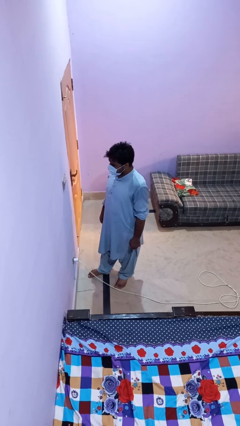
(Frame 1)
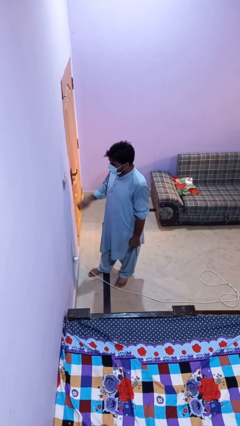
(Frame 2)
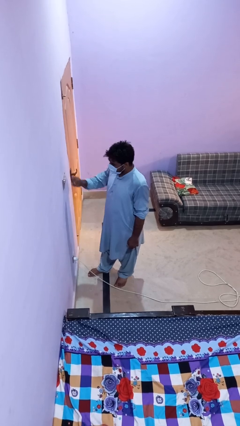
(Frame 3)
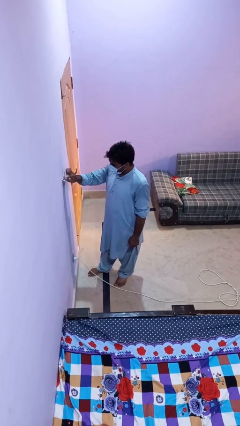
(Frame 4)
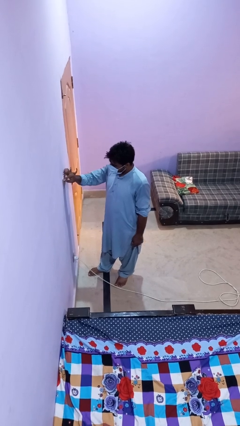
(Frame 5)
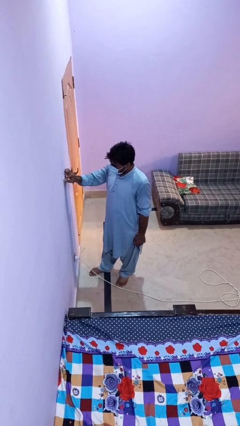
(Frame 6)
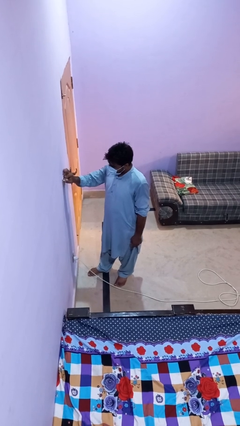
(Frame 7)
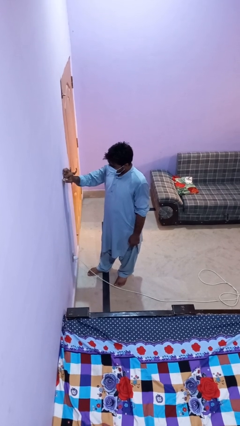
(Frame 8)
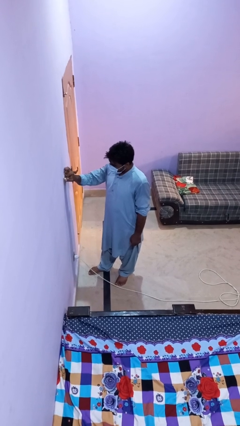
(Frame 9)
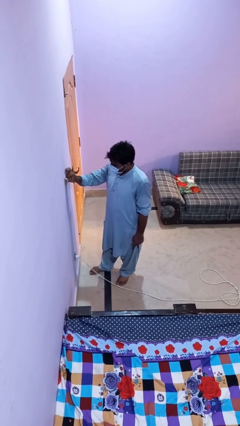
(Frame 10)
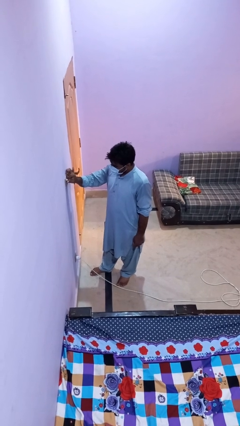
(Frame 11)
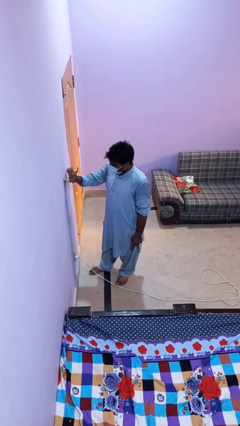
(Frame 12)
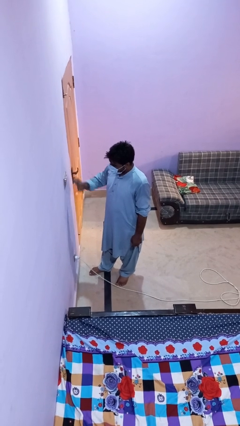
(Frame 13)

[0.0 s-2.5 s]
person adjusts thermostat

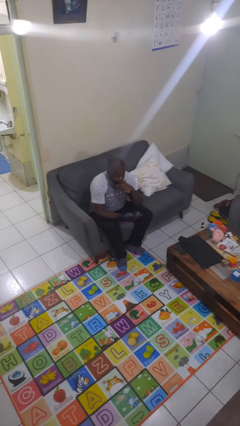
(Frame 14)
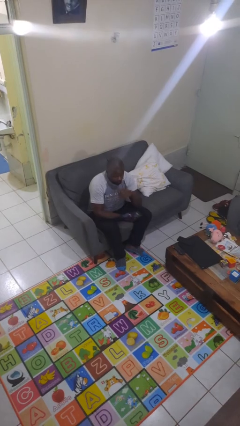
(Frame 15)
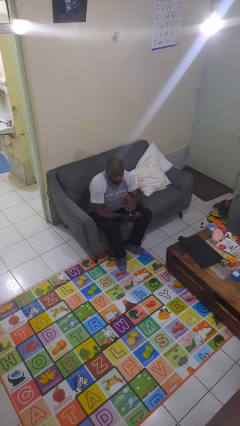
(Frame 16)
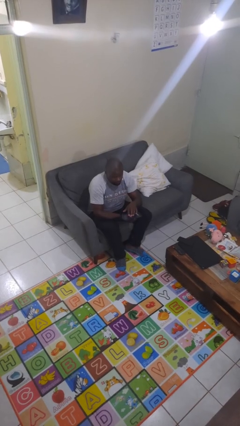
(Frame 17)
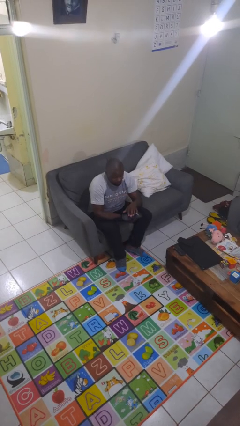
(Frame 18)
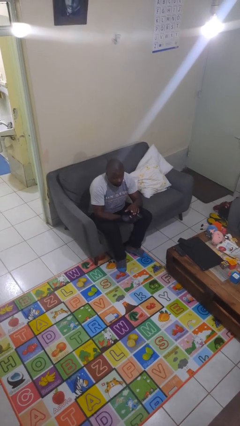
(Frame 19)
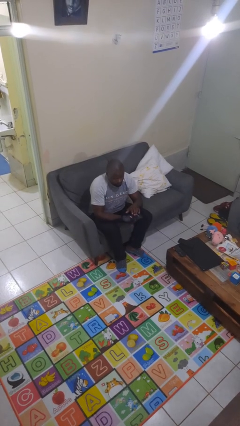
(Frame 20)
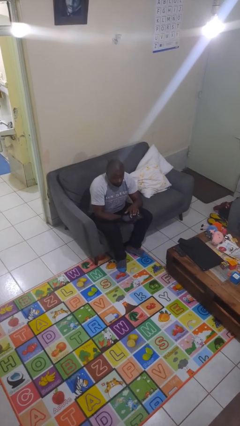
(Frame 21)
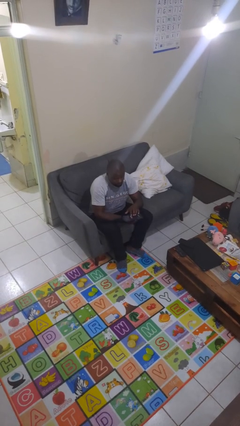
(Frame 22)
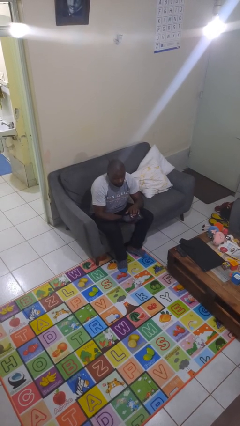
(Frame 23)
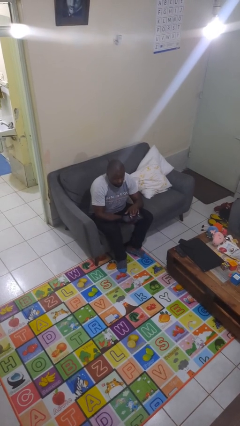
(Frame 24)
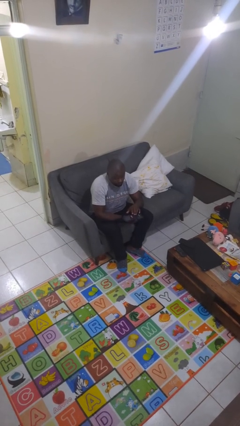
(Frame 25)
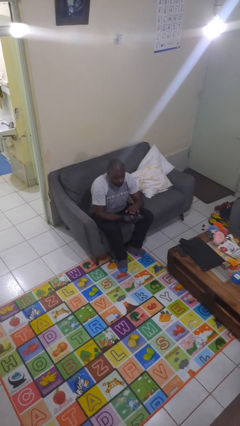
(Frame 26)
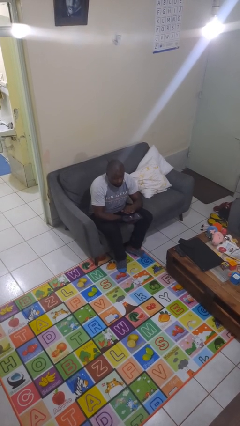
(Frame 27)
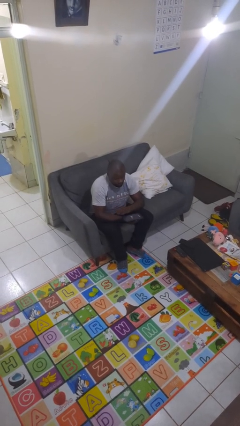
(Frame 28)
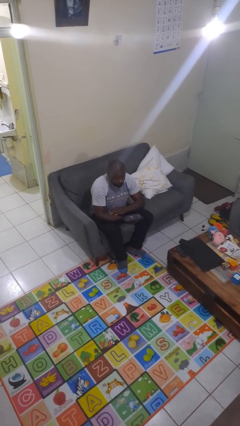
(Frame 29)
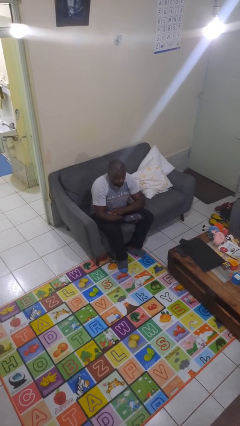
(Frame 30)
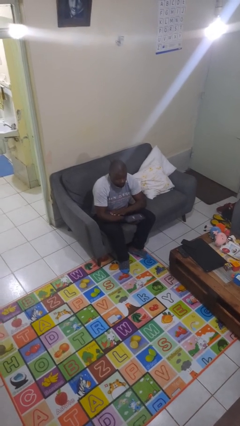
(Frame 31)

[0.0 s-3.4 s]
person interacts with tablet

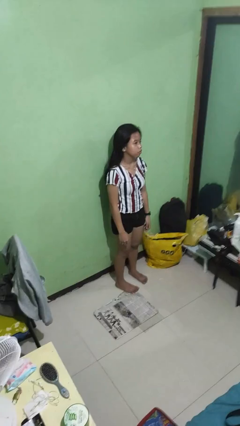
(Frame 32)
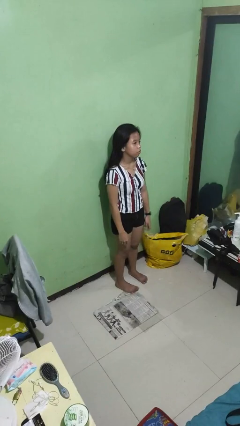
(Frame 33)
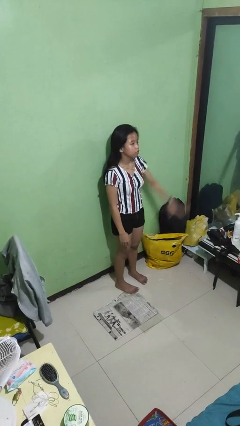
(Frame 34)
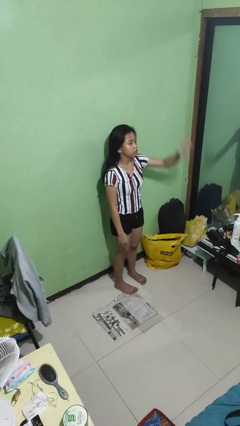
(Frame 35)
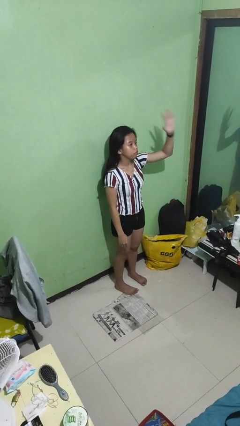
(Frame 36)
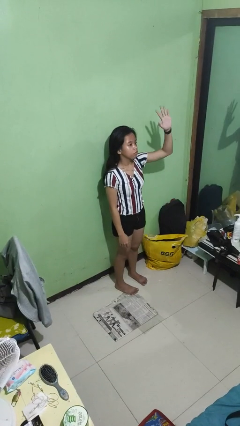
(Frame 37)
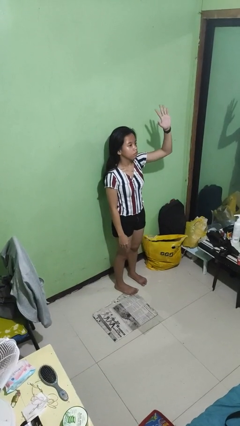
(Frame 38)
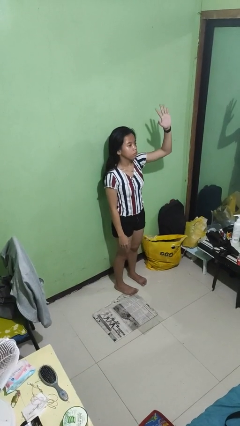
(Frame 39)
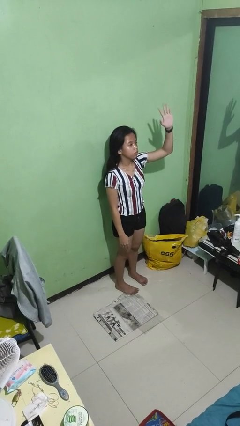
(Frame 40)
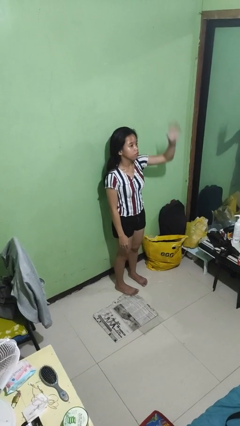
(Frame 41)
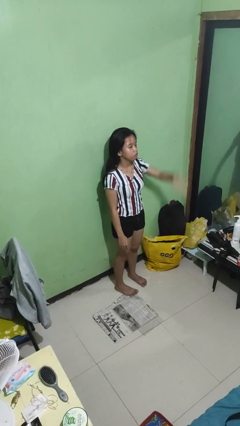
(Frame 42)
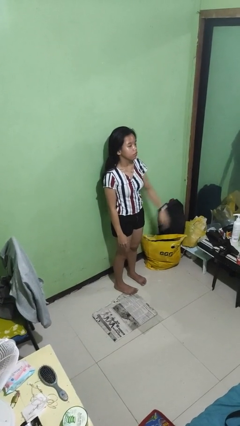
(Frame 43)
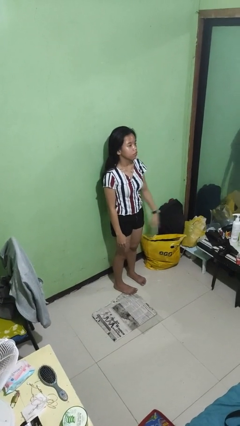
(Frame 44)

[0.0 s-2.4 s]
person gestures number five

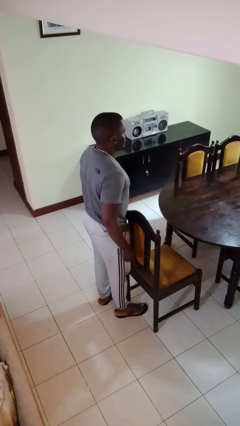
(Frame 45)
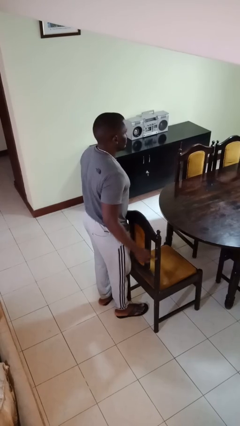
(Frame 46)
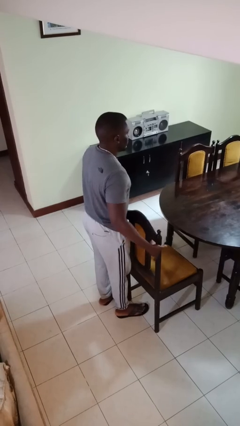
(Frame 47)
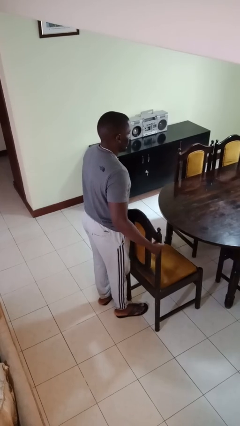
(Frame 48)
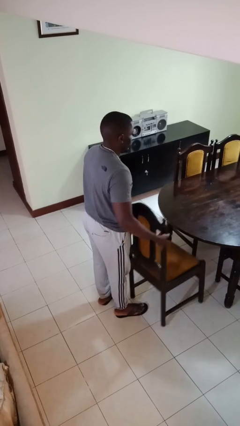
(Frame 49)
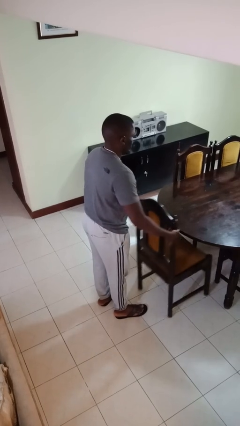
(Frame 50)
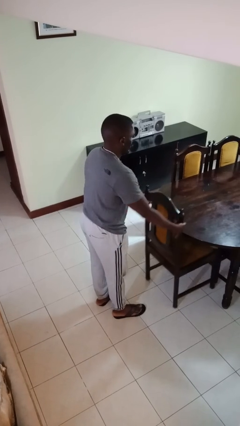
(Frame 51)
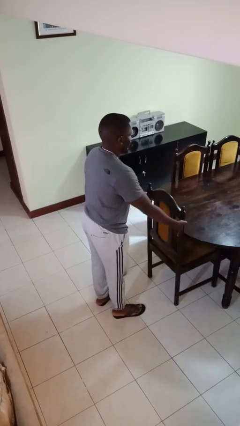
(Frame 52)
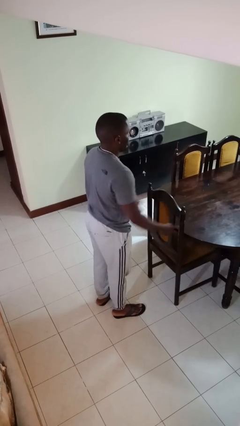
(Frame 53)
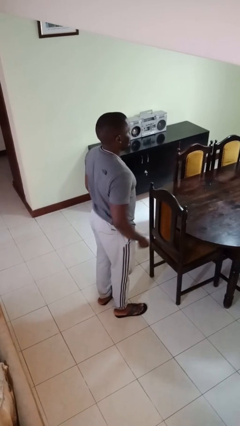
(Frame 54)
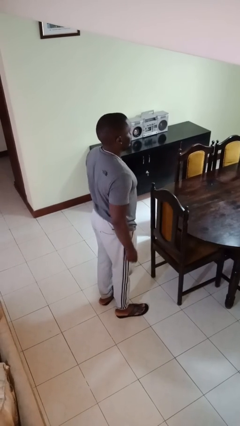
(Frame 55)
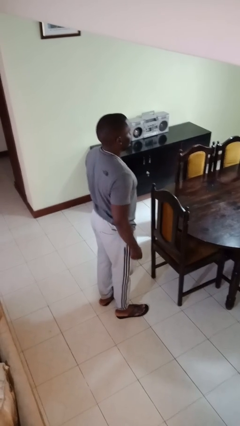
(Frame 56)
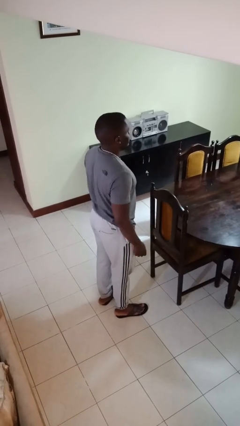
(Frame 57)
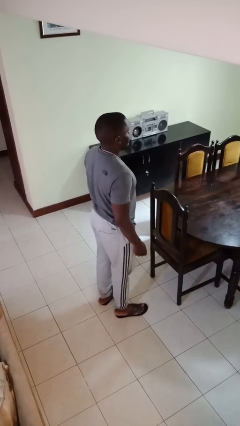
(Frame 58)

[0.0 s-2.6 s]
person pushes in chair

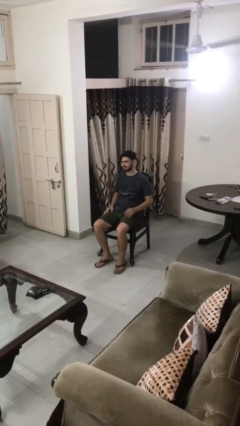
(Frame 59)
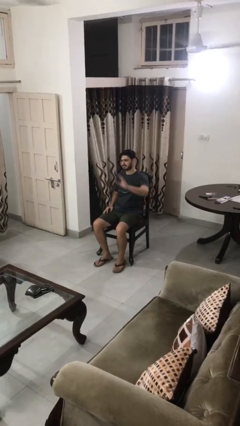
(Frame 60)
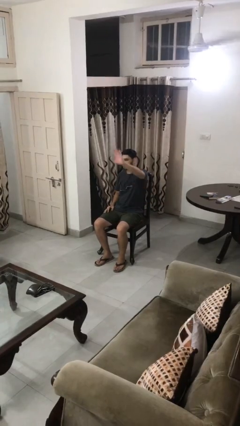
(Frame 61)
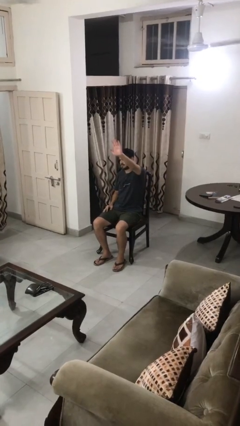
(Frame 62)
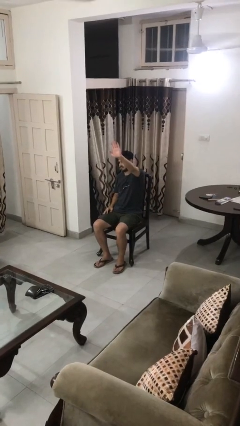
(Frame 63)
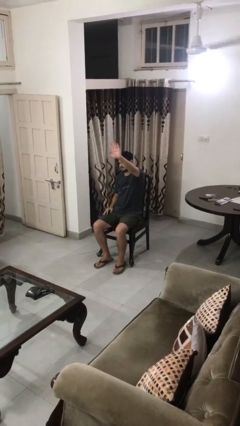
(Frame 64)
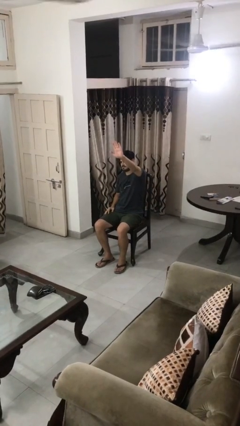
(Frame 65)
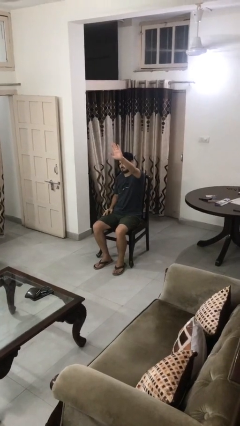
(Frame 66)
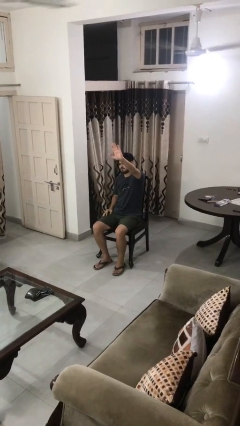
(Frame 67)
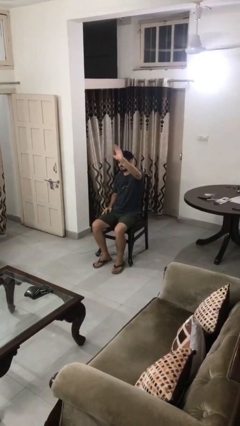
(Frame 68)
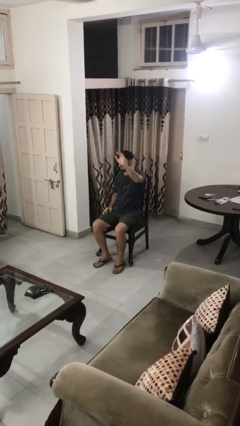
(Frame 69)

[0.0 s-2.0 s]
person gestures raise hand

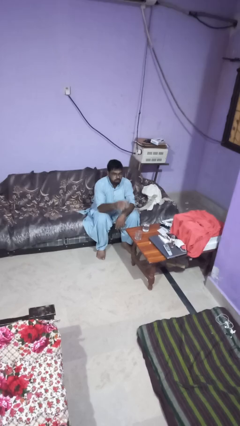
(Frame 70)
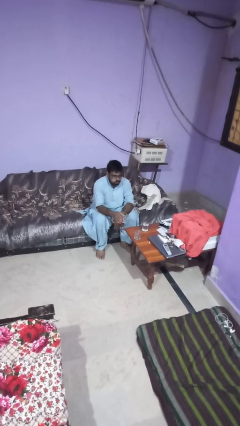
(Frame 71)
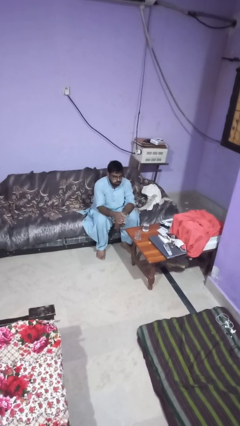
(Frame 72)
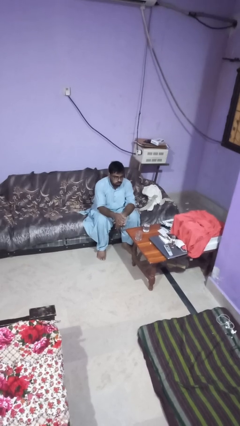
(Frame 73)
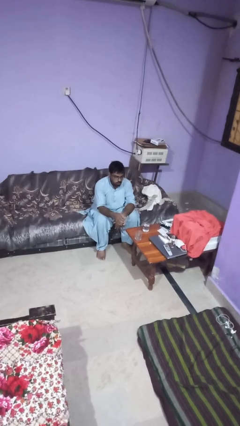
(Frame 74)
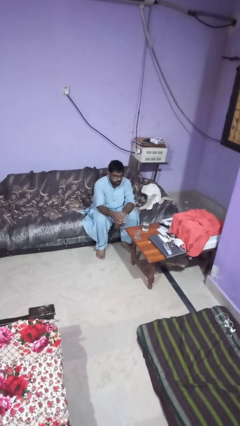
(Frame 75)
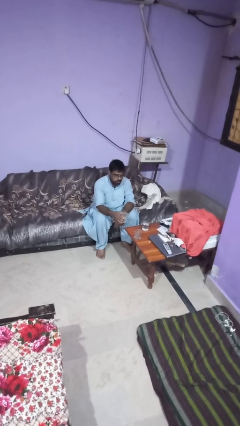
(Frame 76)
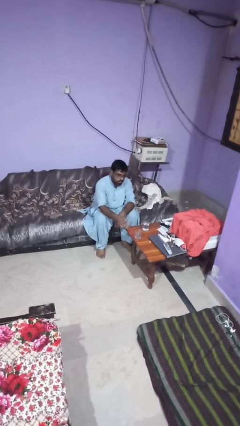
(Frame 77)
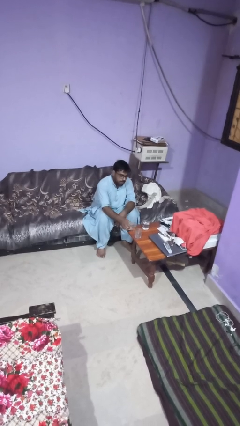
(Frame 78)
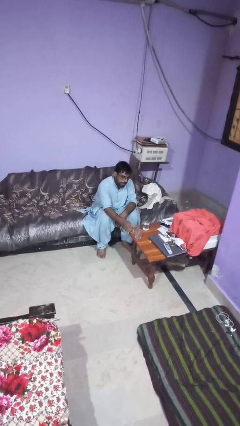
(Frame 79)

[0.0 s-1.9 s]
person puts down object on table

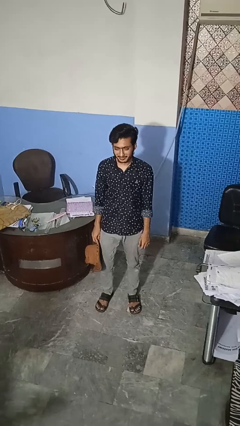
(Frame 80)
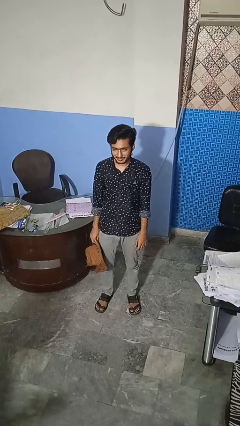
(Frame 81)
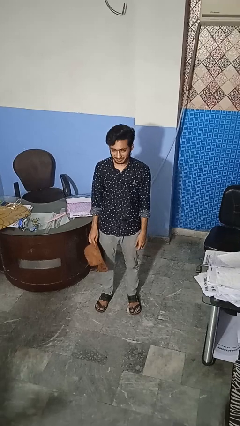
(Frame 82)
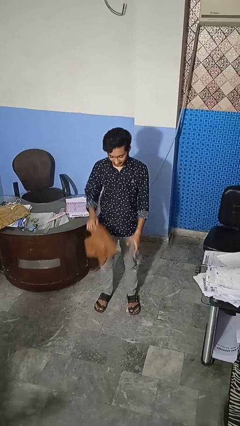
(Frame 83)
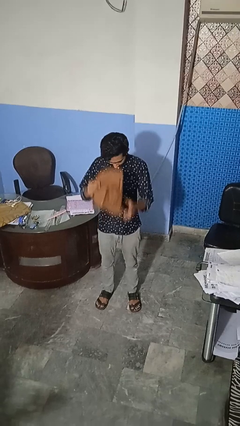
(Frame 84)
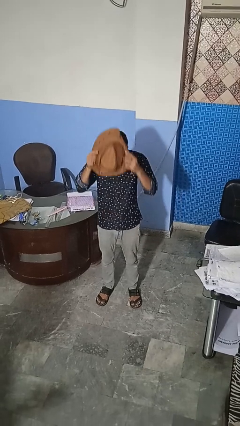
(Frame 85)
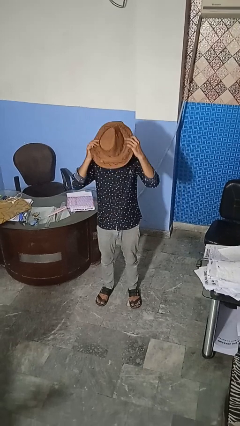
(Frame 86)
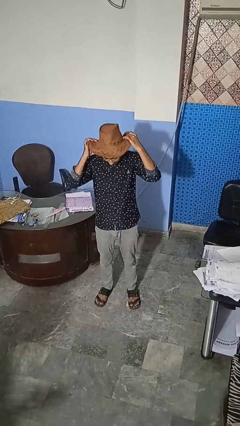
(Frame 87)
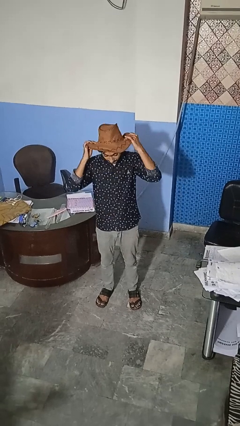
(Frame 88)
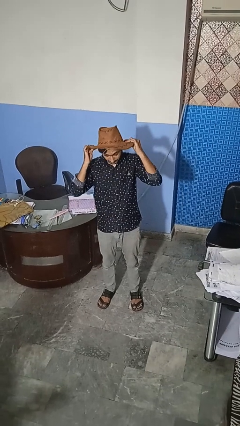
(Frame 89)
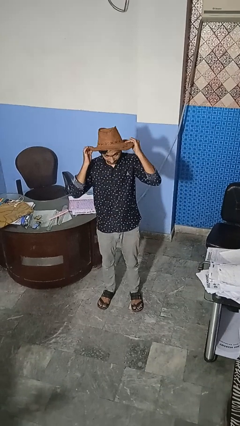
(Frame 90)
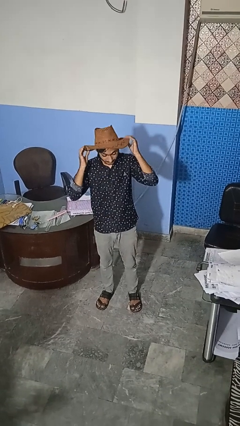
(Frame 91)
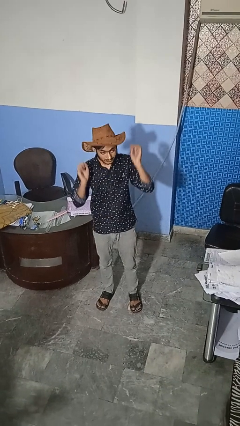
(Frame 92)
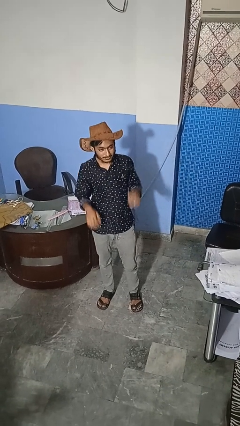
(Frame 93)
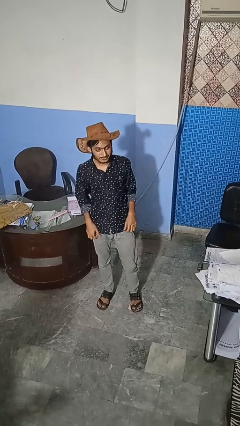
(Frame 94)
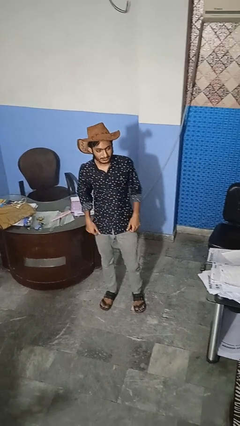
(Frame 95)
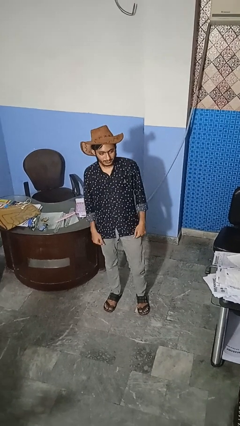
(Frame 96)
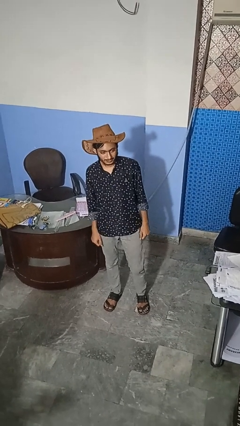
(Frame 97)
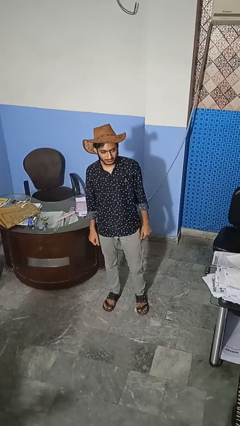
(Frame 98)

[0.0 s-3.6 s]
person puts on hat
